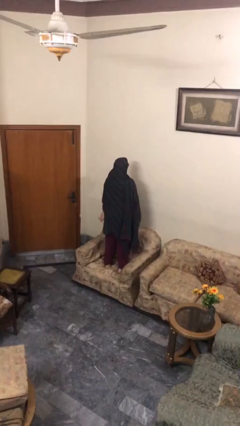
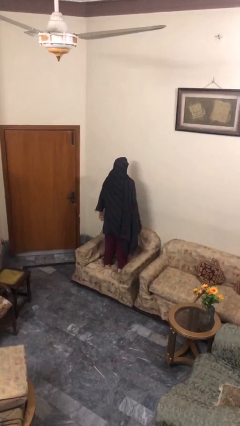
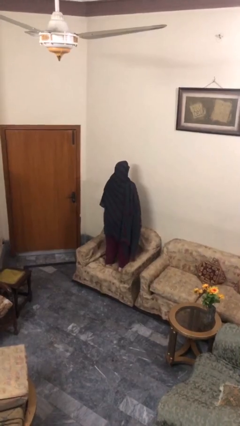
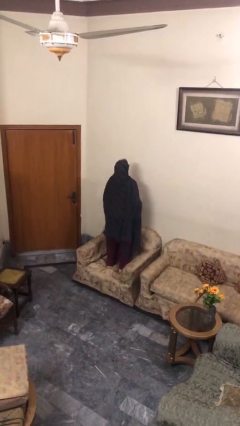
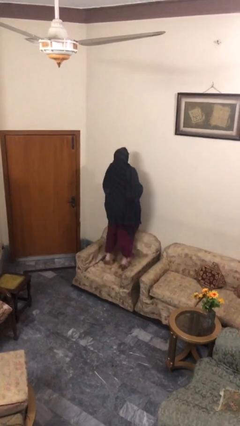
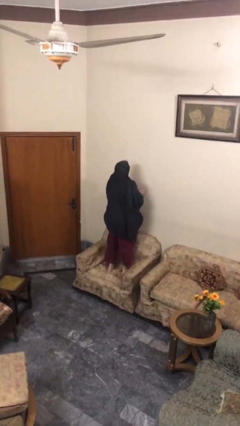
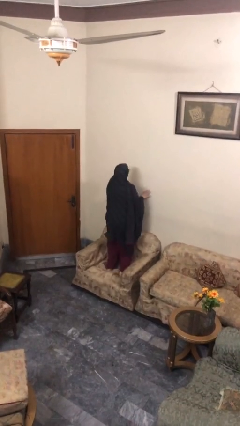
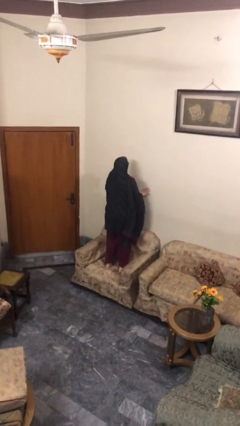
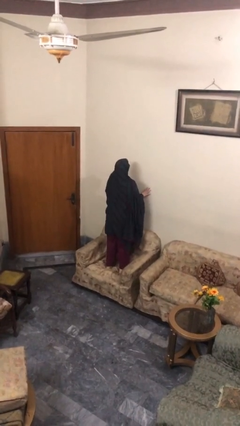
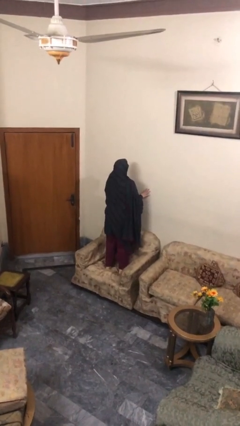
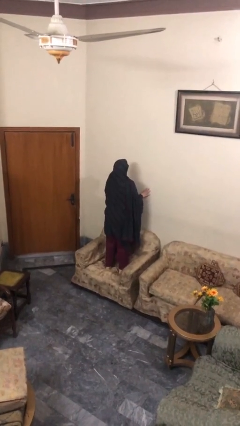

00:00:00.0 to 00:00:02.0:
person jumps on couch

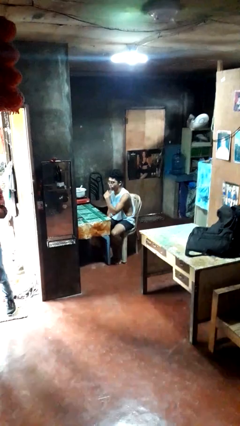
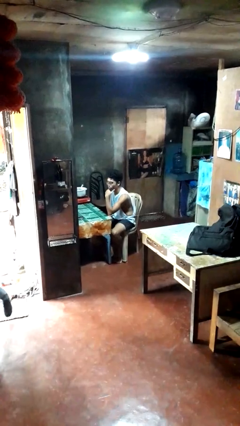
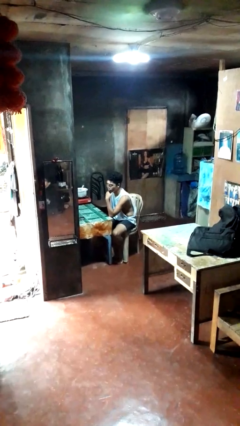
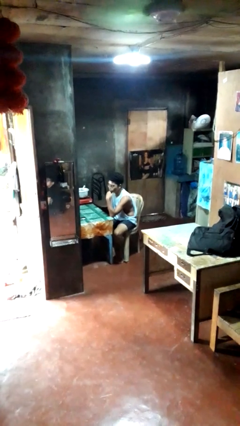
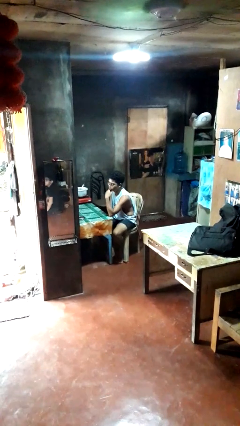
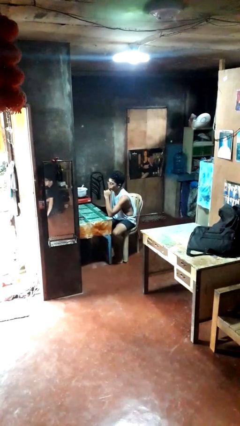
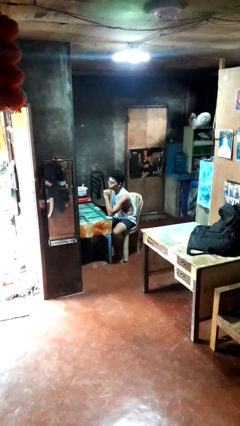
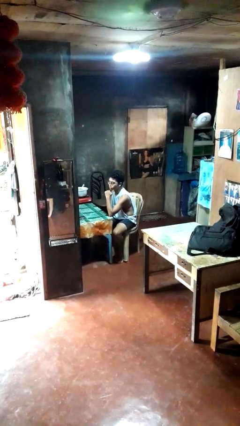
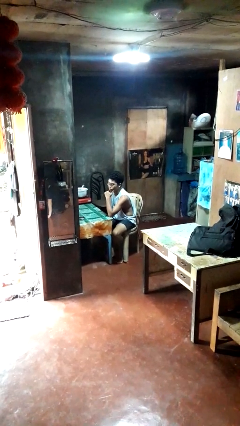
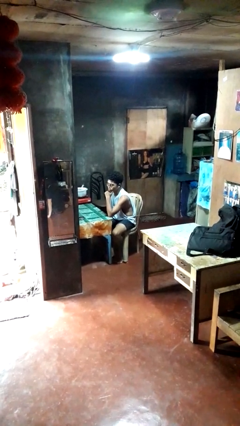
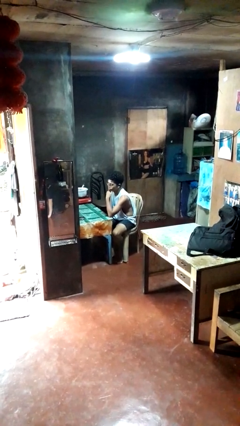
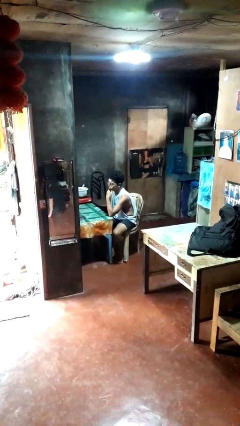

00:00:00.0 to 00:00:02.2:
person strokes chin

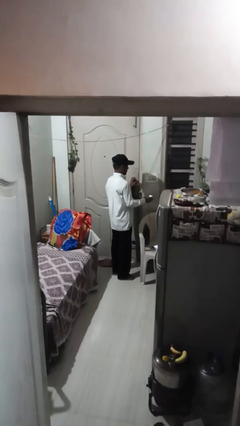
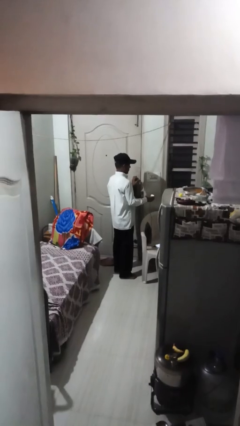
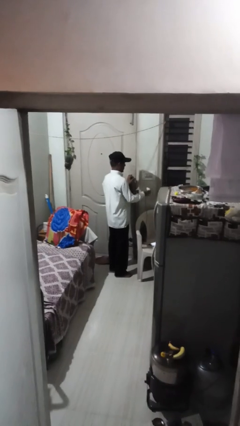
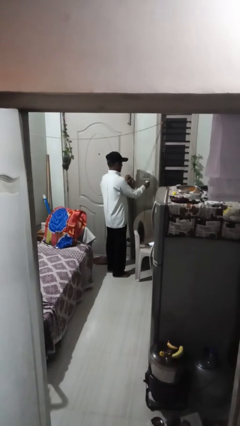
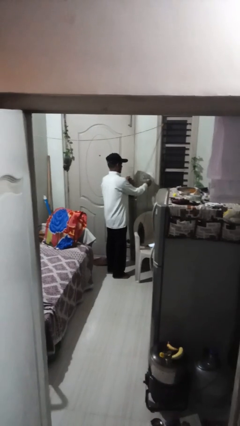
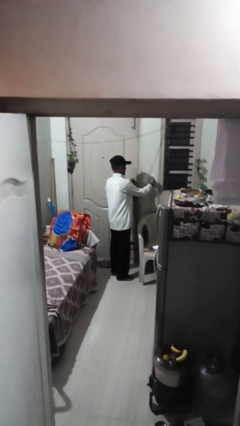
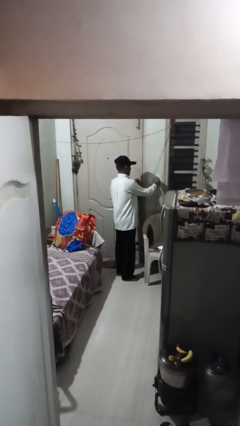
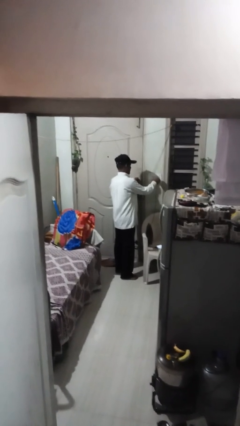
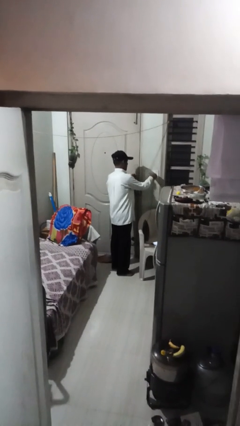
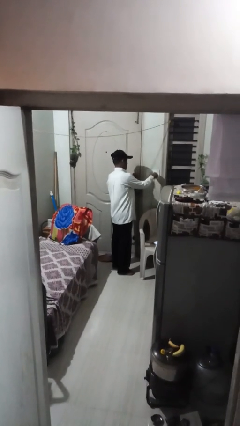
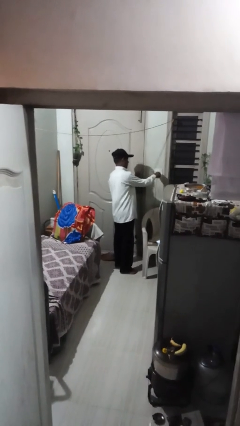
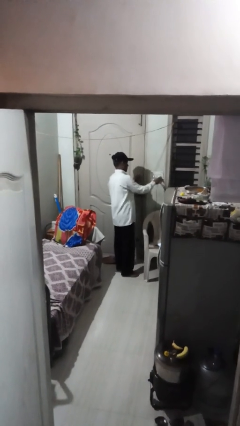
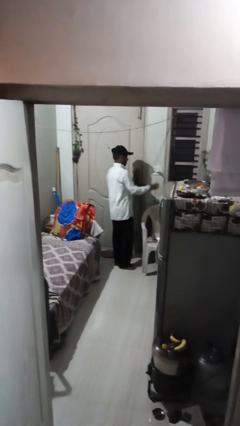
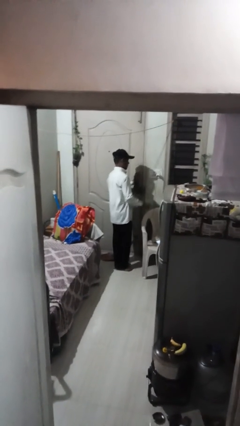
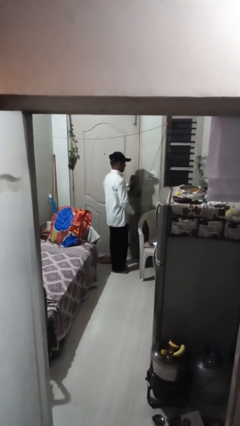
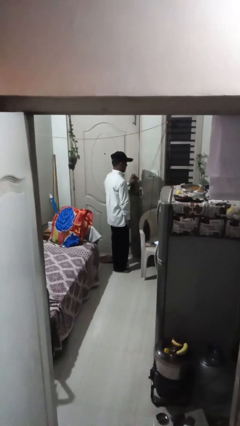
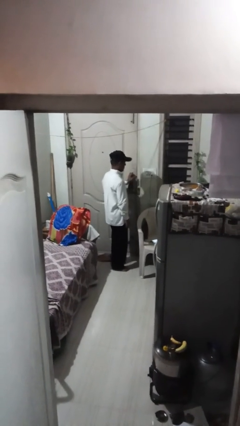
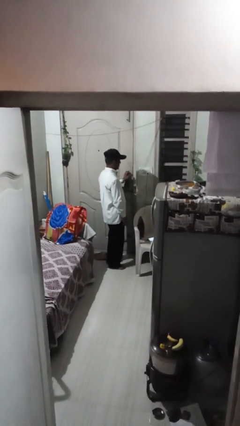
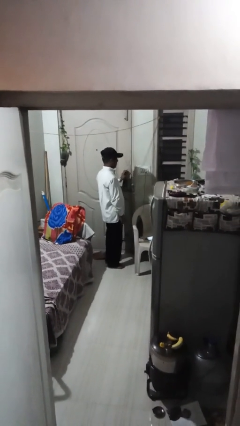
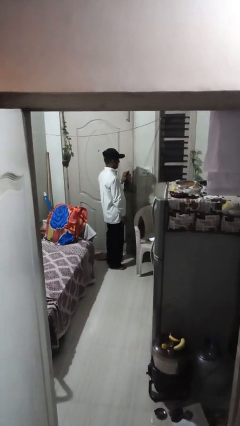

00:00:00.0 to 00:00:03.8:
person plugs into electrical socket

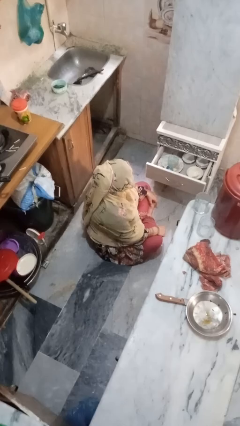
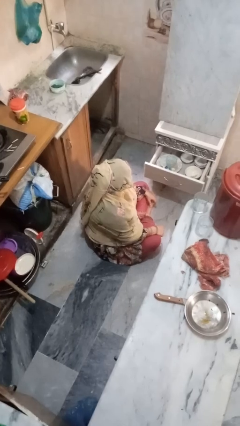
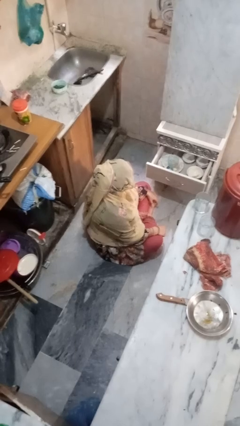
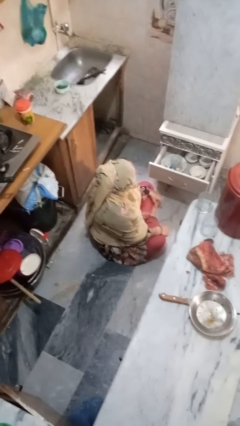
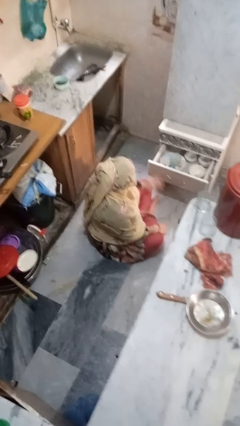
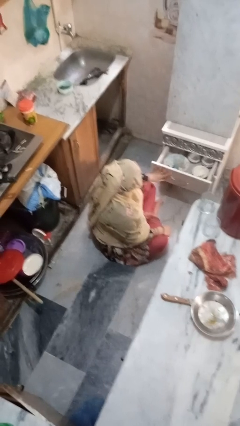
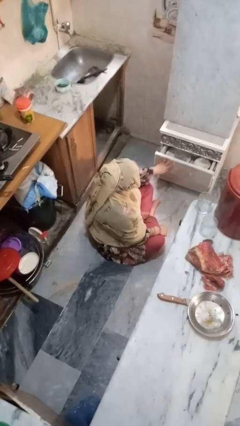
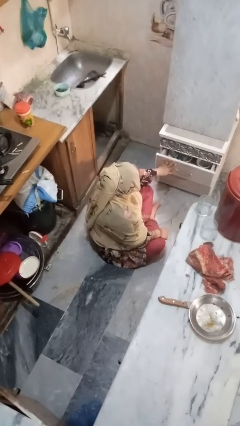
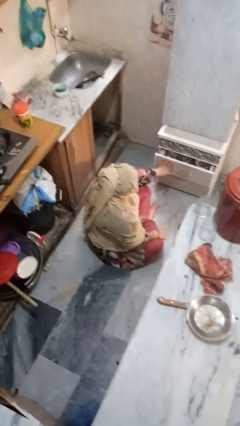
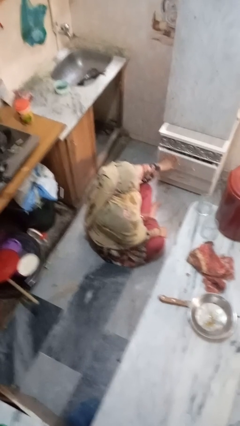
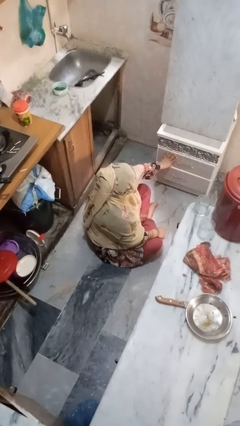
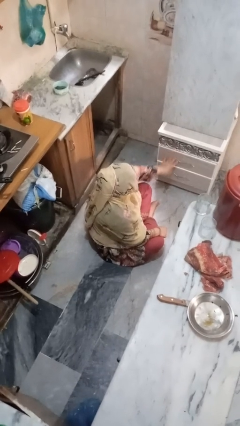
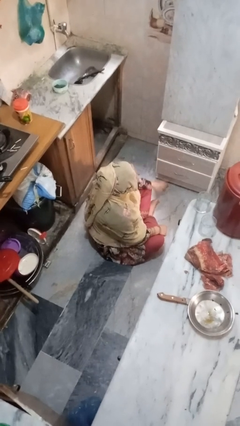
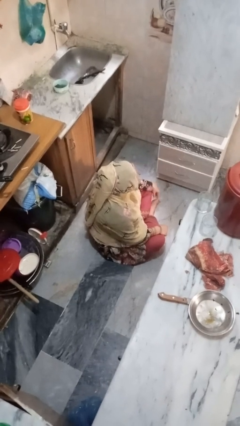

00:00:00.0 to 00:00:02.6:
person closes kitchen drawer

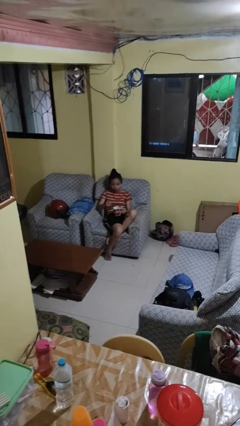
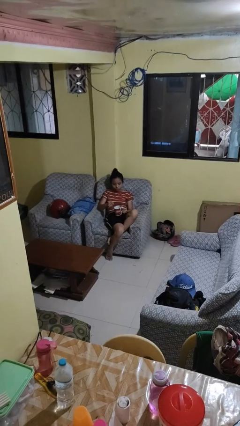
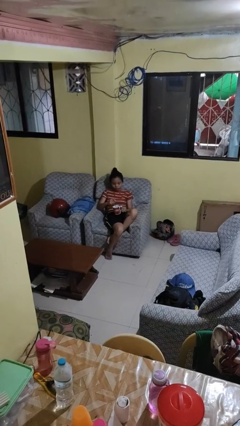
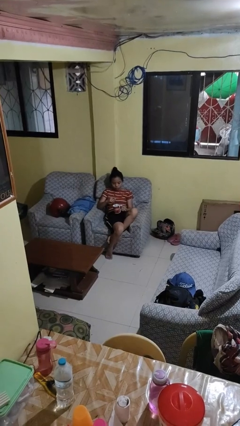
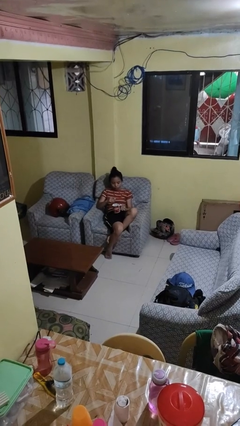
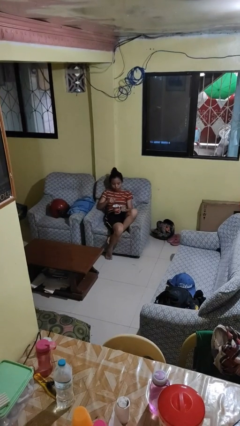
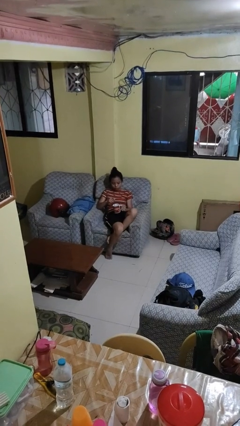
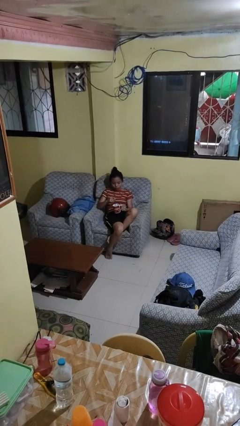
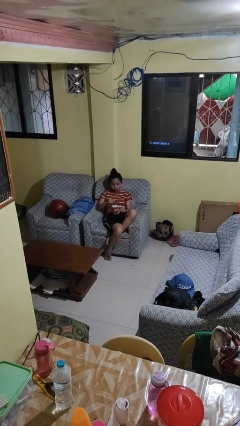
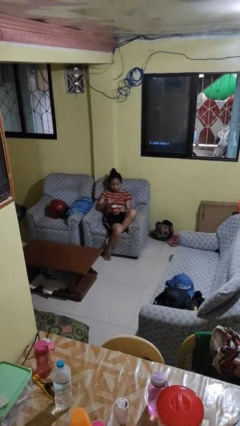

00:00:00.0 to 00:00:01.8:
person stirs mug

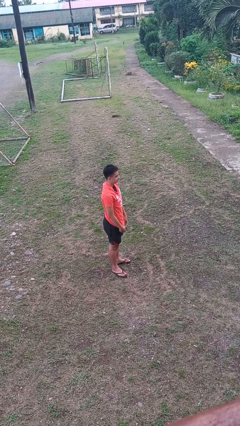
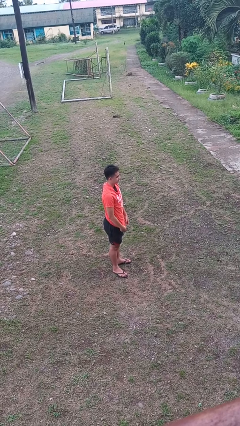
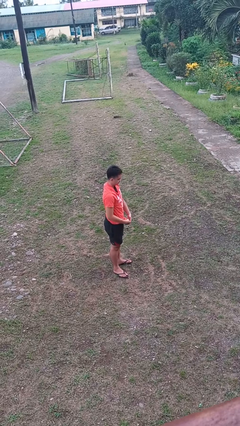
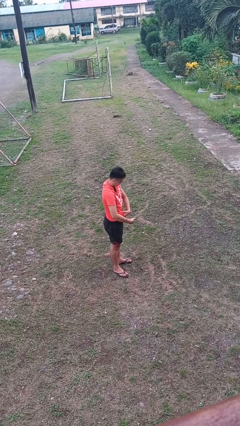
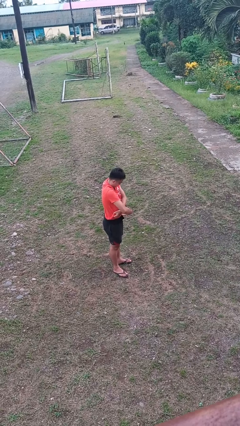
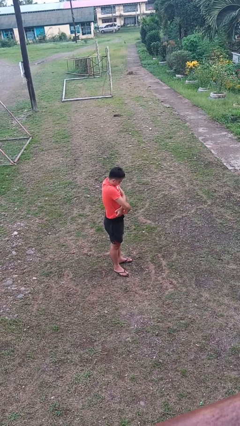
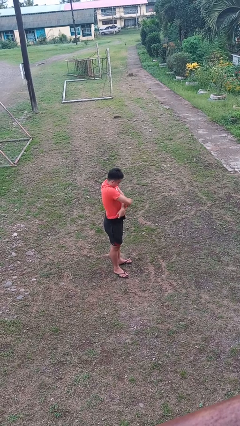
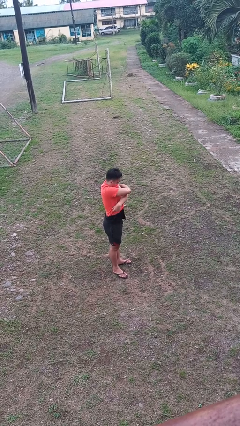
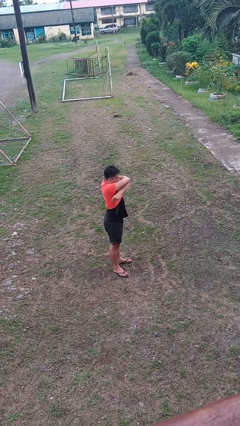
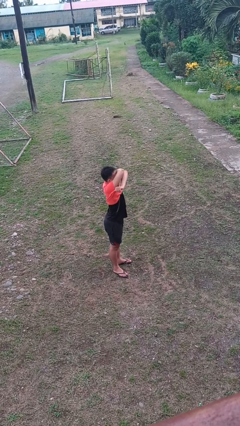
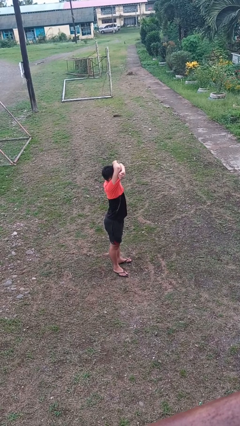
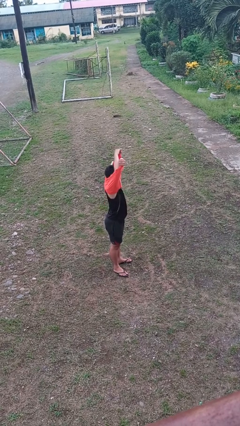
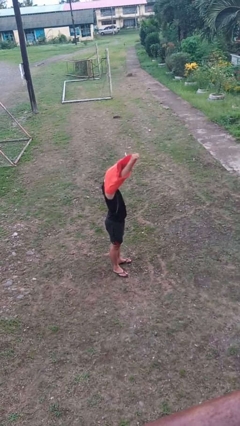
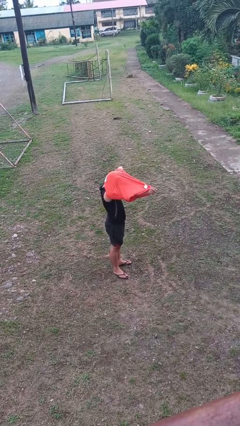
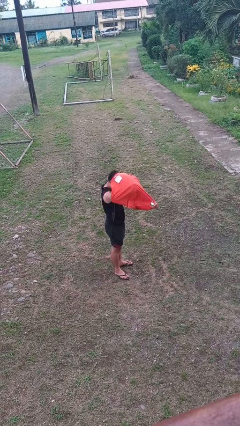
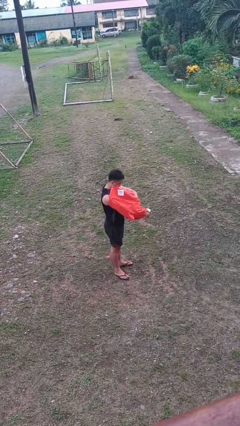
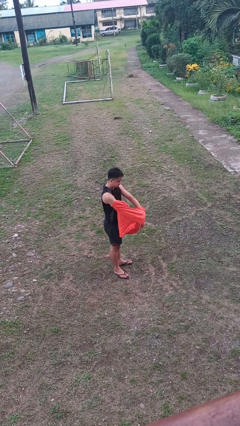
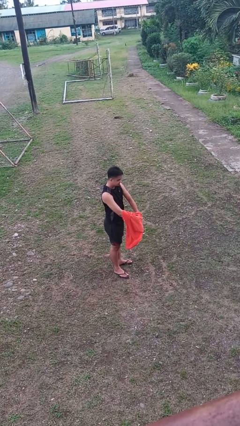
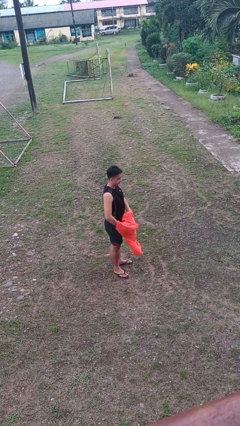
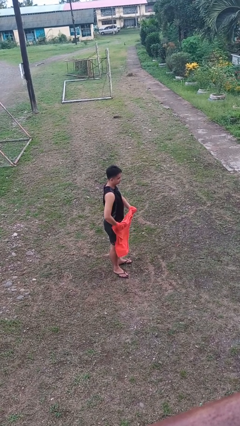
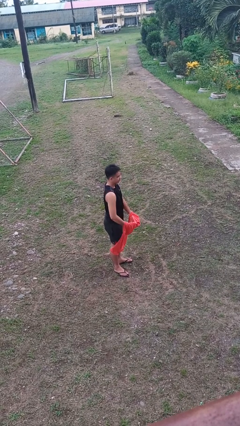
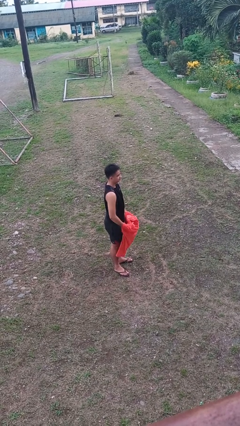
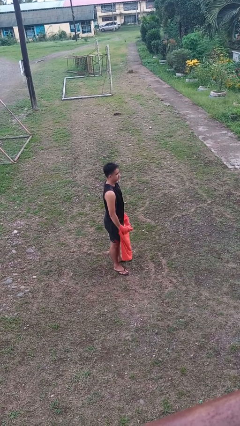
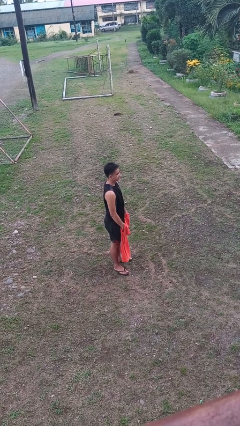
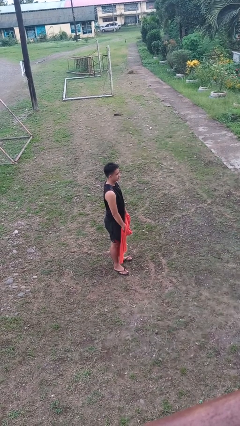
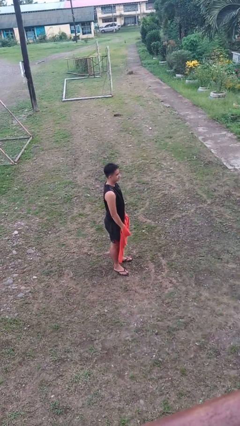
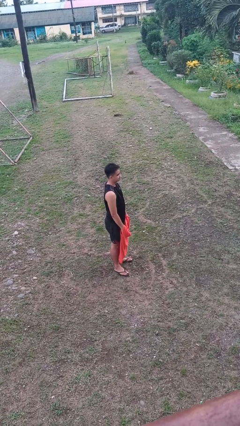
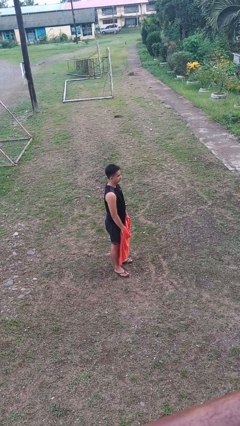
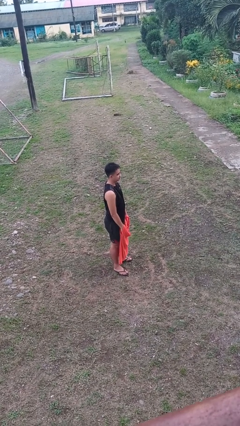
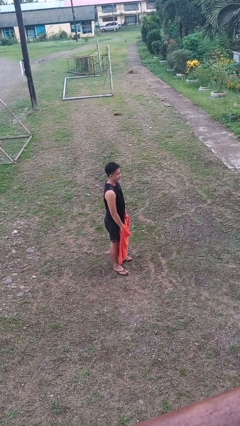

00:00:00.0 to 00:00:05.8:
person takes off shirt
